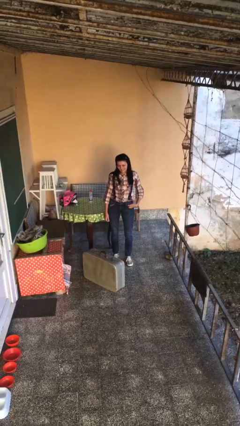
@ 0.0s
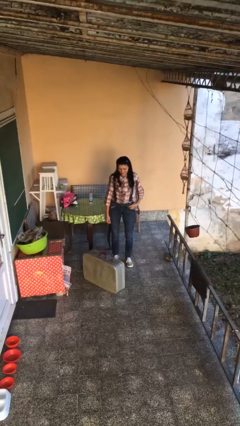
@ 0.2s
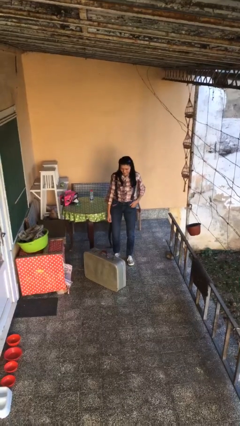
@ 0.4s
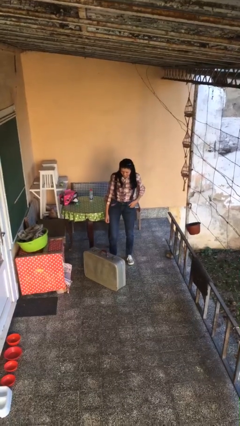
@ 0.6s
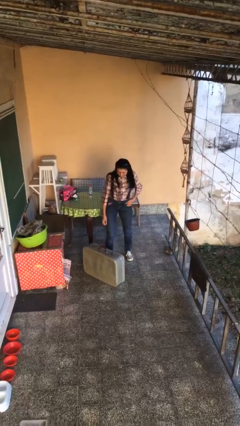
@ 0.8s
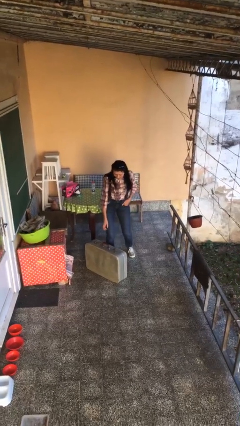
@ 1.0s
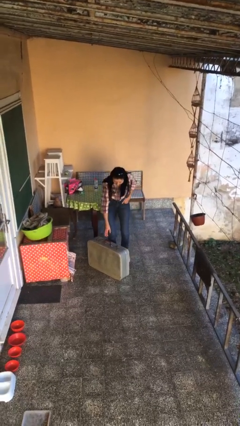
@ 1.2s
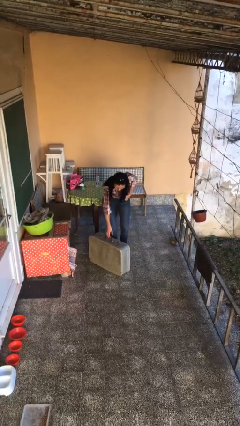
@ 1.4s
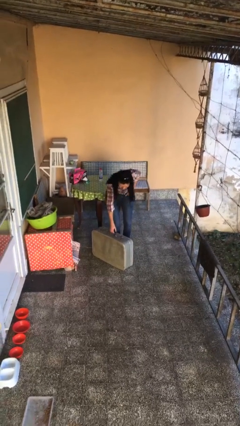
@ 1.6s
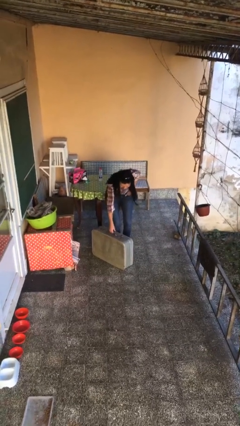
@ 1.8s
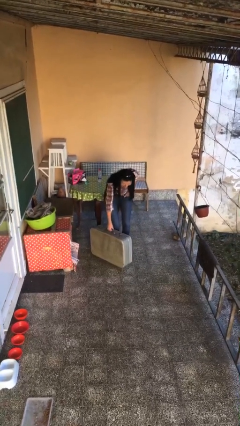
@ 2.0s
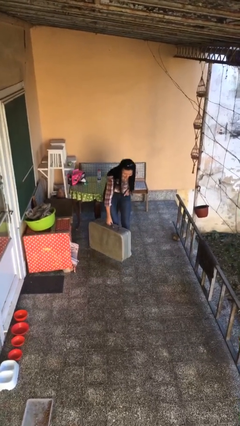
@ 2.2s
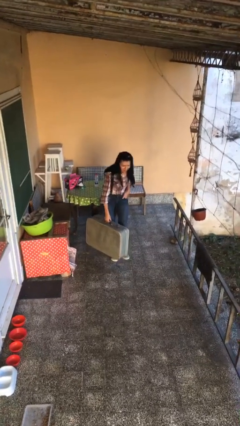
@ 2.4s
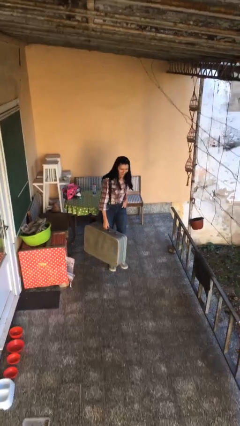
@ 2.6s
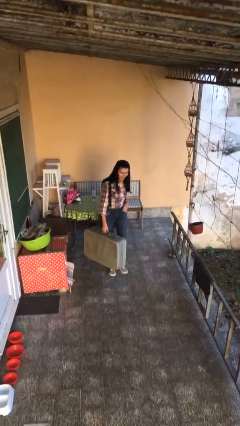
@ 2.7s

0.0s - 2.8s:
person picks up object from floor

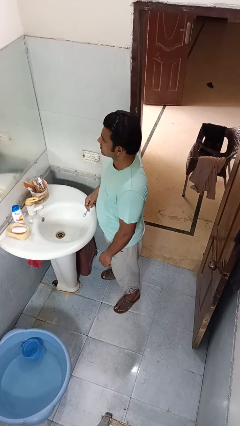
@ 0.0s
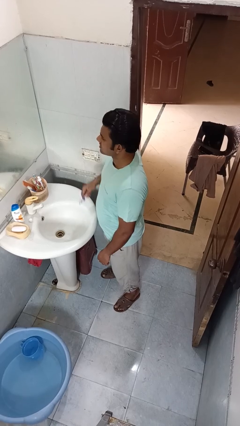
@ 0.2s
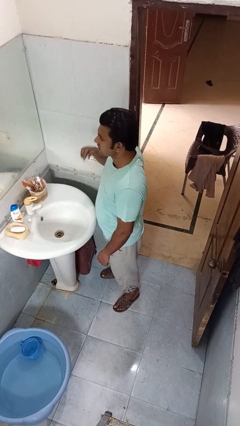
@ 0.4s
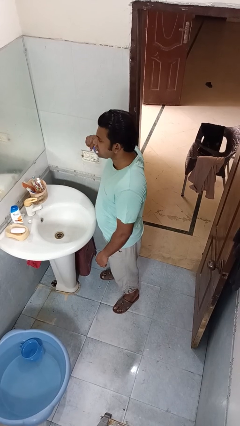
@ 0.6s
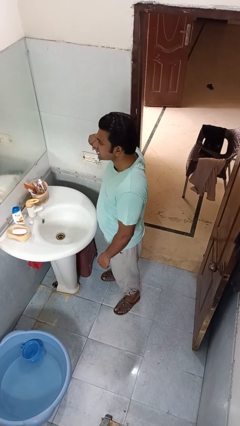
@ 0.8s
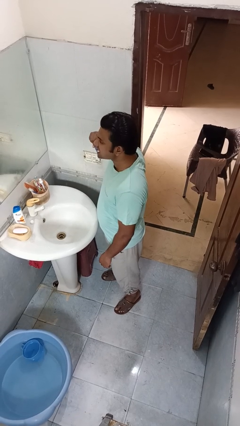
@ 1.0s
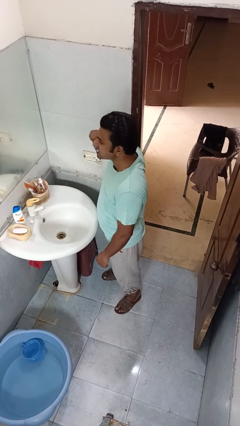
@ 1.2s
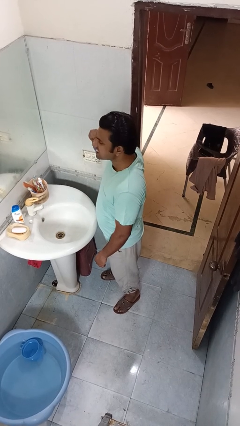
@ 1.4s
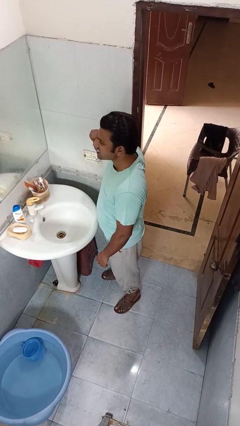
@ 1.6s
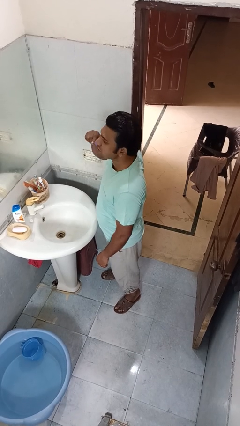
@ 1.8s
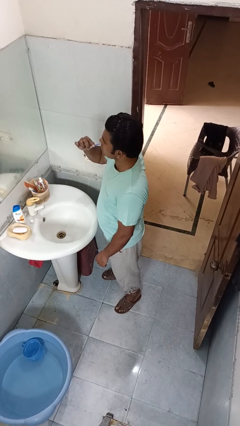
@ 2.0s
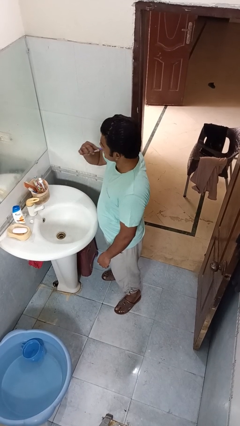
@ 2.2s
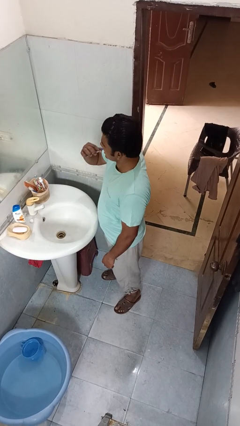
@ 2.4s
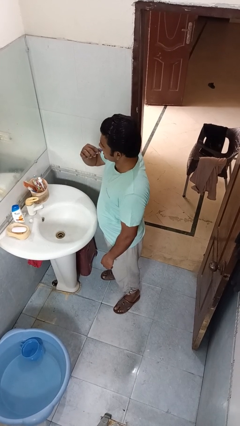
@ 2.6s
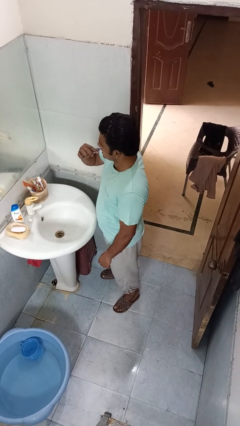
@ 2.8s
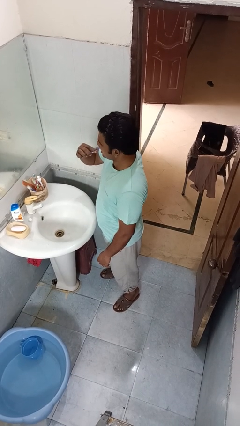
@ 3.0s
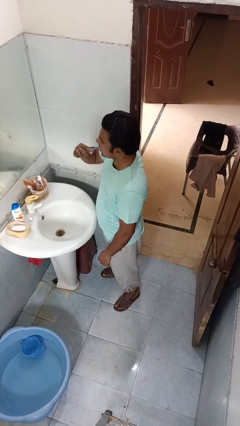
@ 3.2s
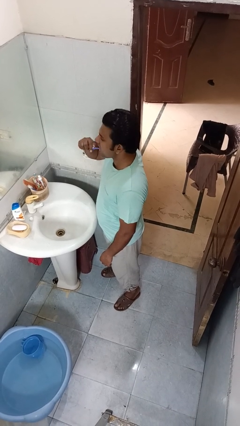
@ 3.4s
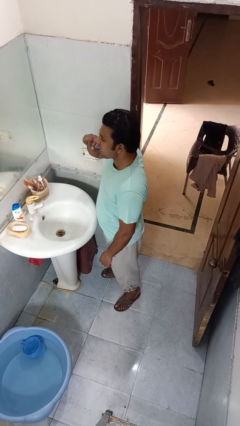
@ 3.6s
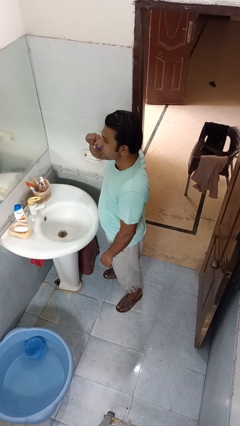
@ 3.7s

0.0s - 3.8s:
person brushes teeth

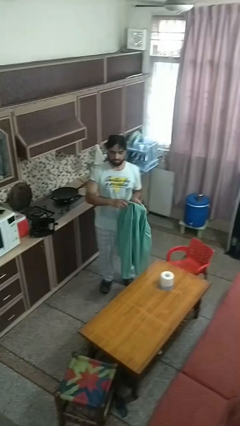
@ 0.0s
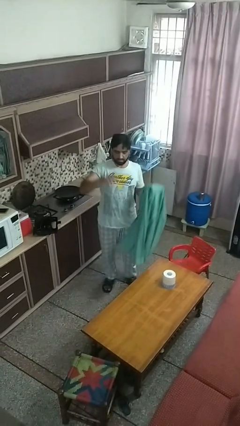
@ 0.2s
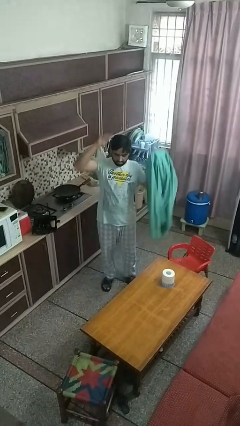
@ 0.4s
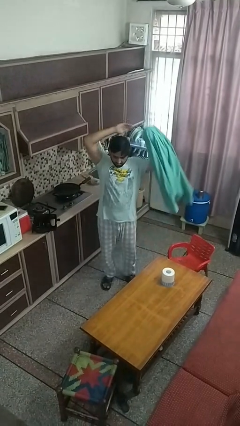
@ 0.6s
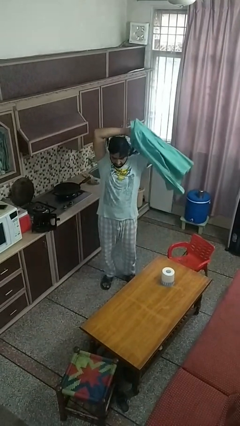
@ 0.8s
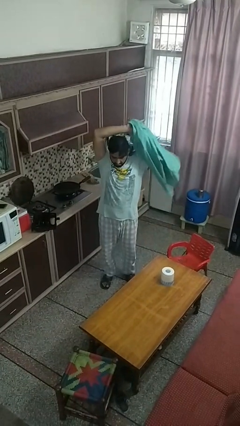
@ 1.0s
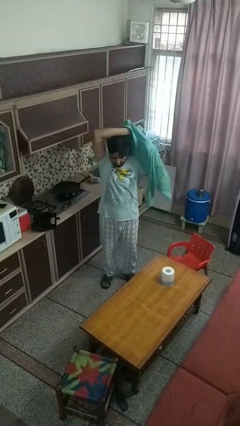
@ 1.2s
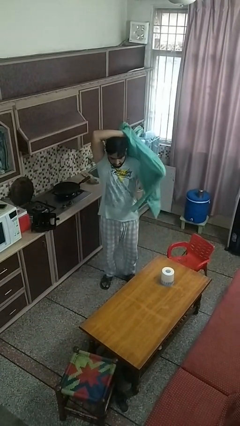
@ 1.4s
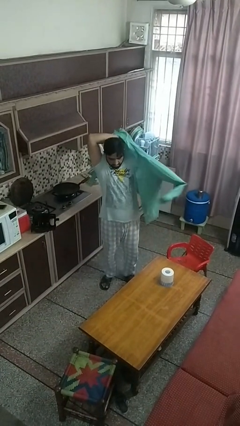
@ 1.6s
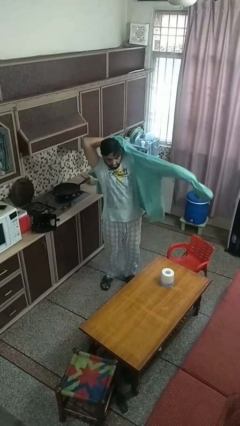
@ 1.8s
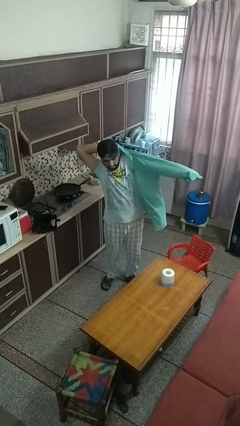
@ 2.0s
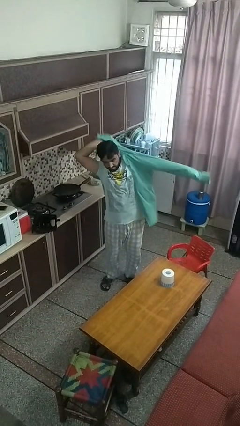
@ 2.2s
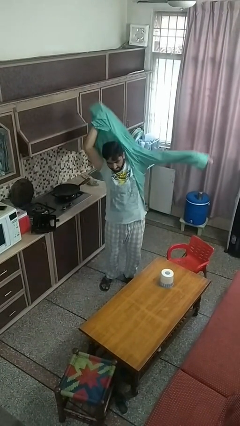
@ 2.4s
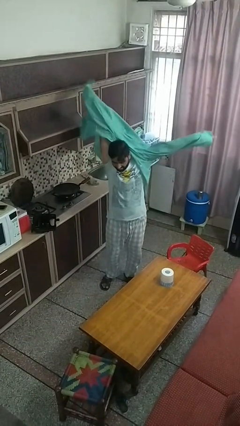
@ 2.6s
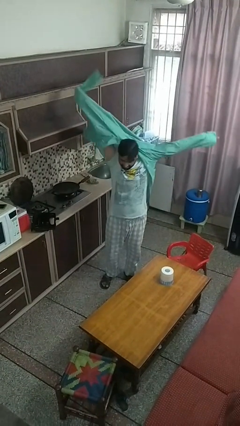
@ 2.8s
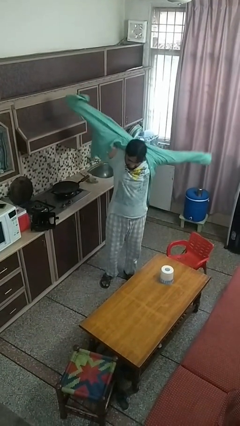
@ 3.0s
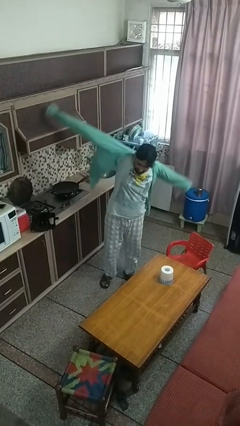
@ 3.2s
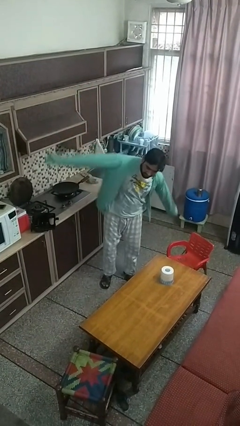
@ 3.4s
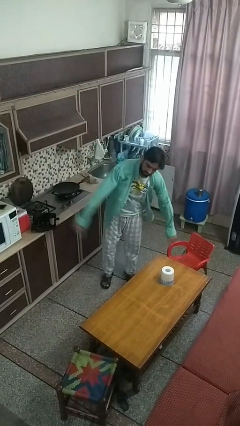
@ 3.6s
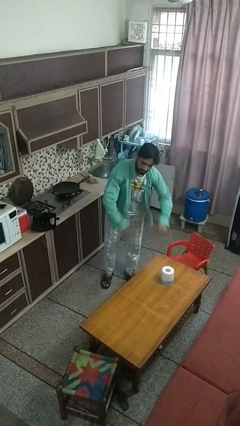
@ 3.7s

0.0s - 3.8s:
person puts on shirt

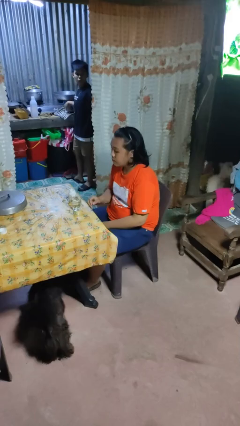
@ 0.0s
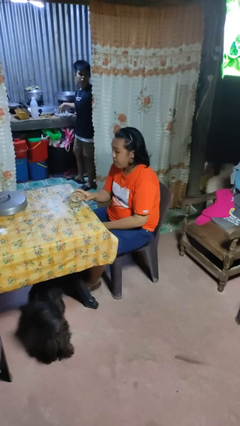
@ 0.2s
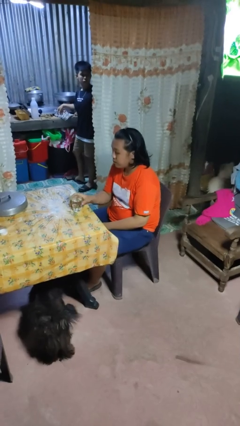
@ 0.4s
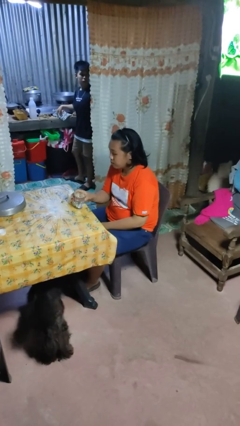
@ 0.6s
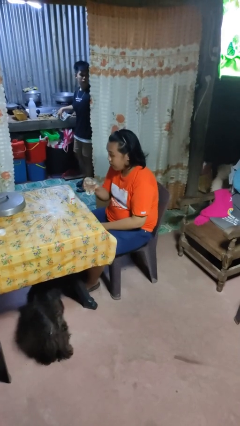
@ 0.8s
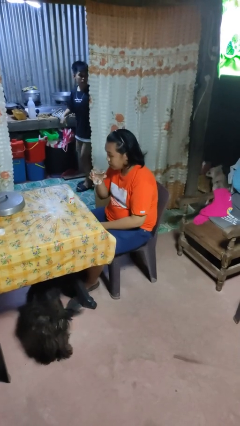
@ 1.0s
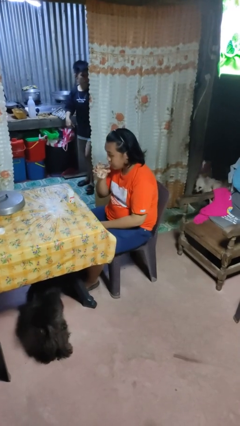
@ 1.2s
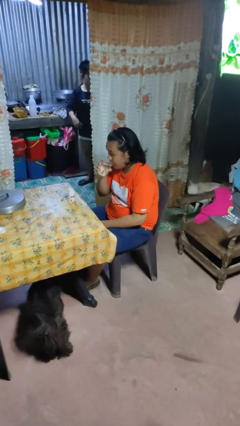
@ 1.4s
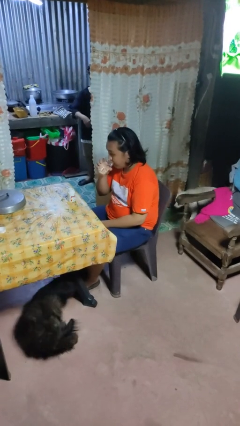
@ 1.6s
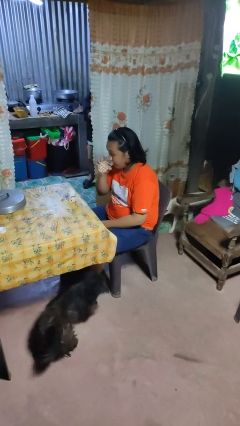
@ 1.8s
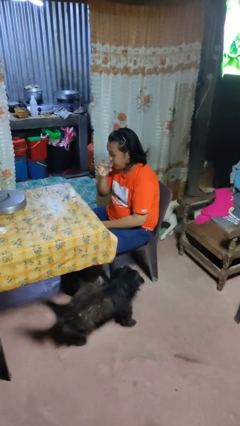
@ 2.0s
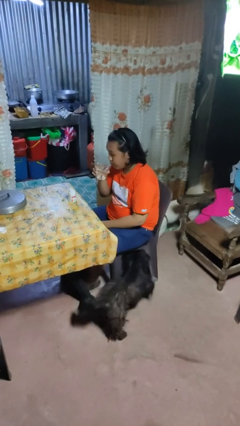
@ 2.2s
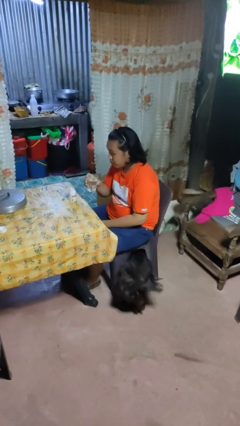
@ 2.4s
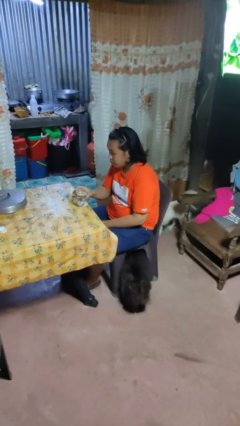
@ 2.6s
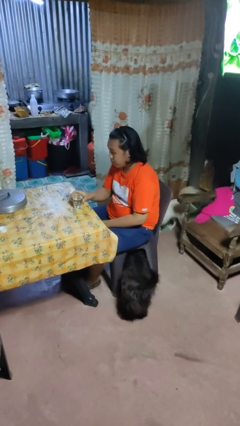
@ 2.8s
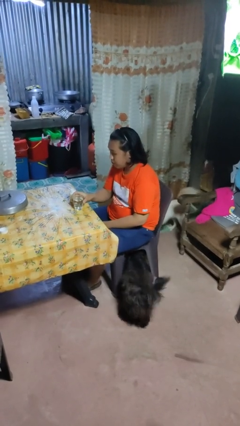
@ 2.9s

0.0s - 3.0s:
person drinks from cup

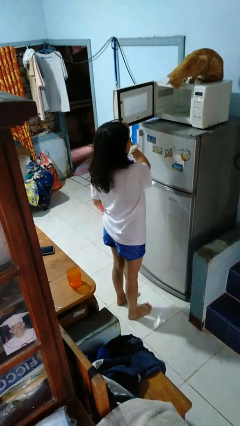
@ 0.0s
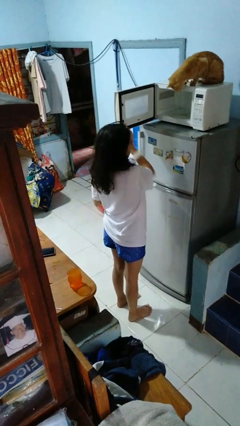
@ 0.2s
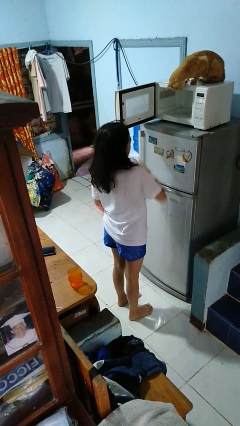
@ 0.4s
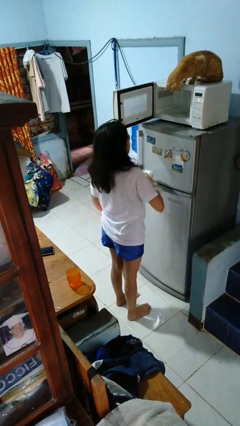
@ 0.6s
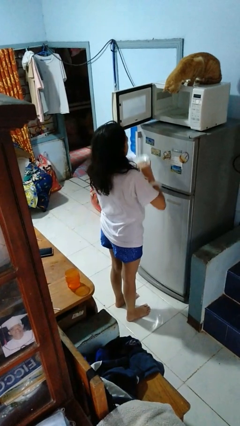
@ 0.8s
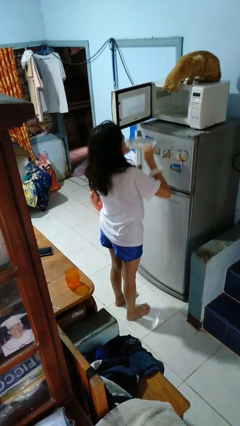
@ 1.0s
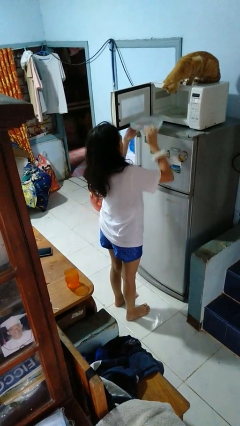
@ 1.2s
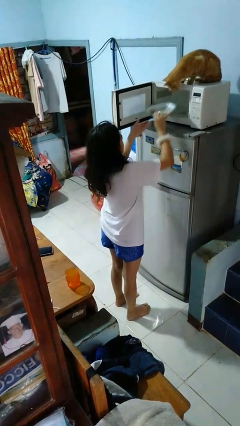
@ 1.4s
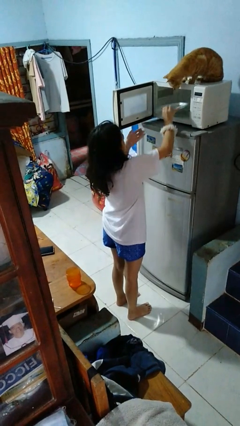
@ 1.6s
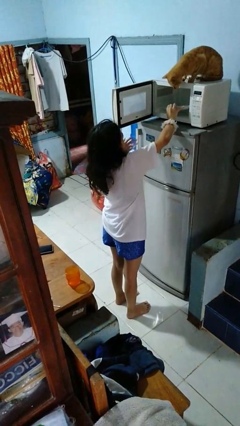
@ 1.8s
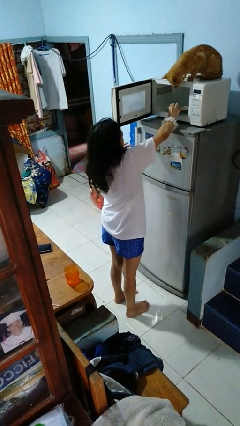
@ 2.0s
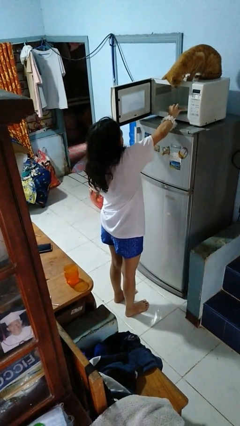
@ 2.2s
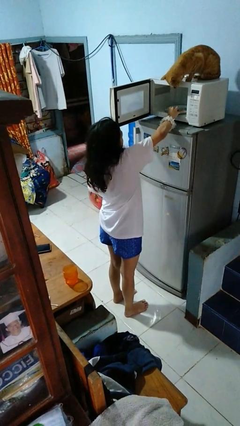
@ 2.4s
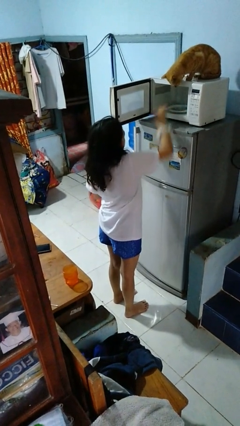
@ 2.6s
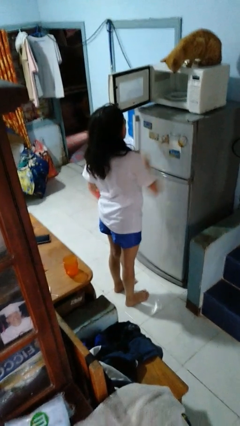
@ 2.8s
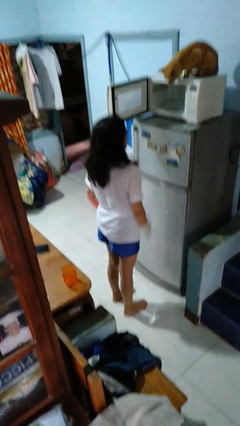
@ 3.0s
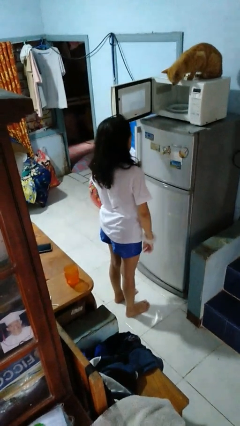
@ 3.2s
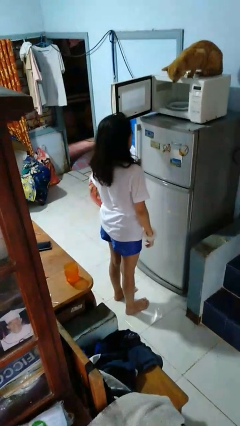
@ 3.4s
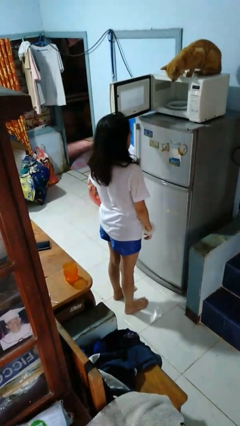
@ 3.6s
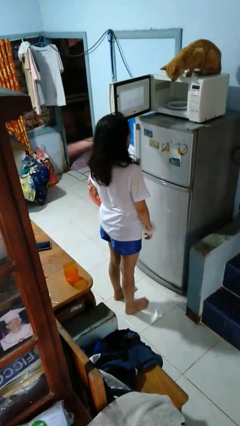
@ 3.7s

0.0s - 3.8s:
person puts object into microwave

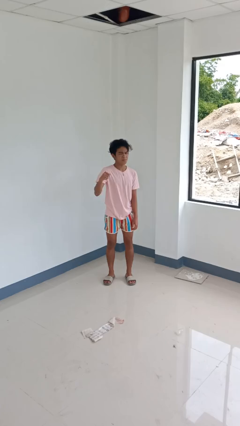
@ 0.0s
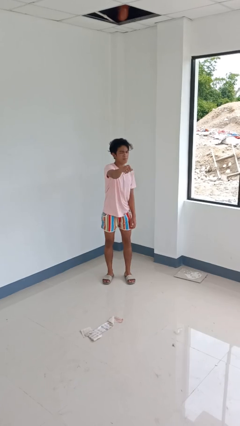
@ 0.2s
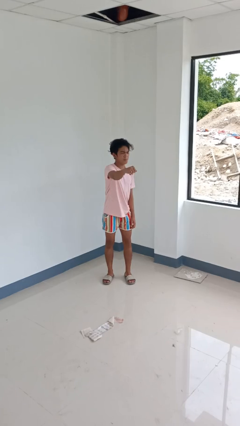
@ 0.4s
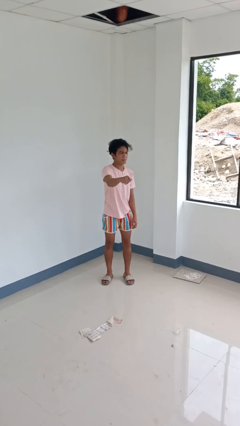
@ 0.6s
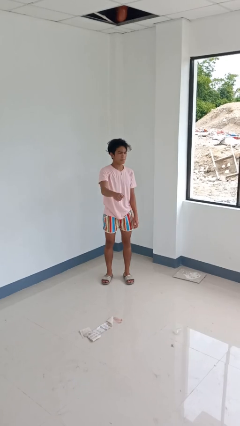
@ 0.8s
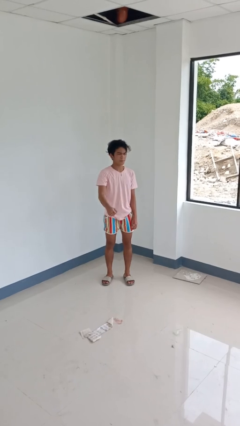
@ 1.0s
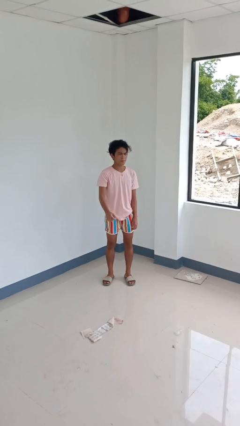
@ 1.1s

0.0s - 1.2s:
person punches
